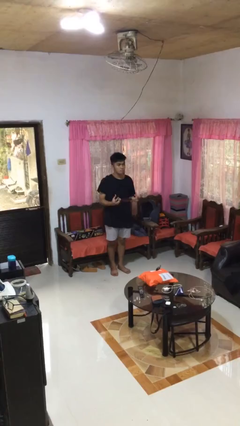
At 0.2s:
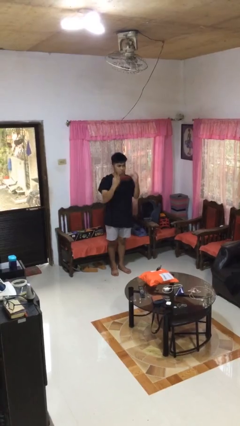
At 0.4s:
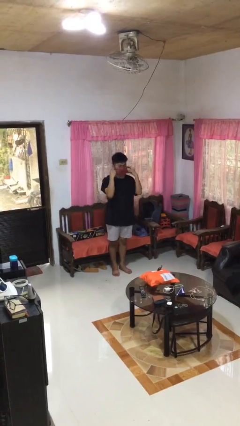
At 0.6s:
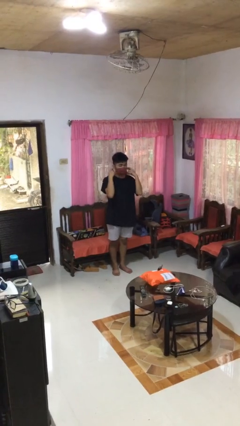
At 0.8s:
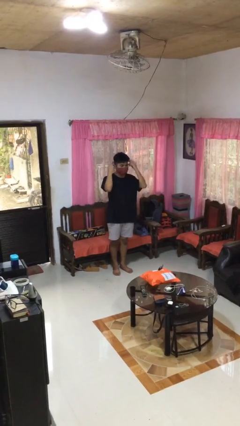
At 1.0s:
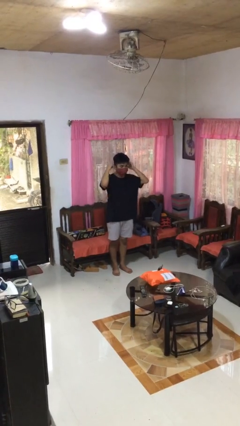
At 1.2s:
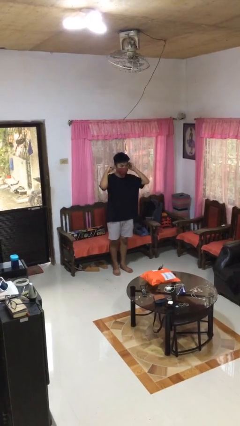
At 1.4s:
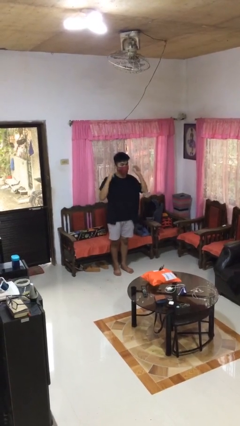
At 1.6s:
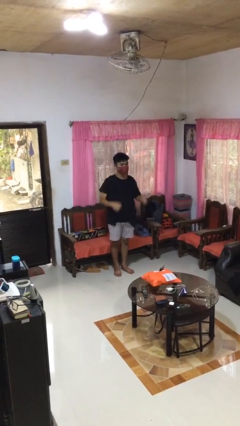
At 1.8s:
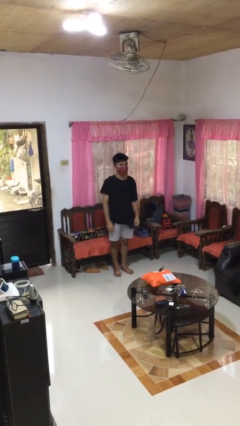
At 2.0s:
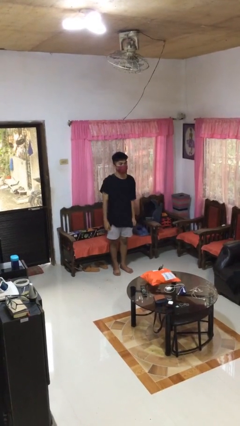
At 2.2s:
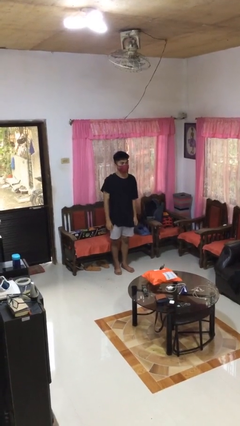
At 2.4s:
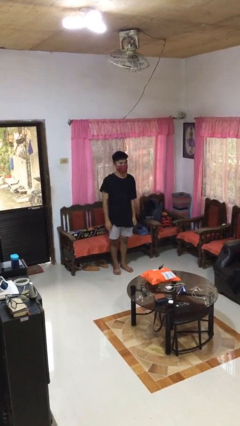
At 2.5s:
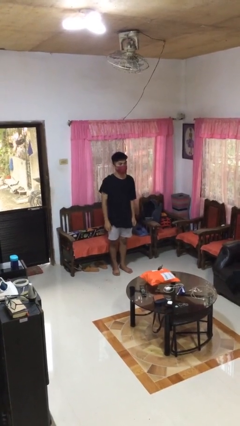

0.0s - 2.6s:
person puts on facemask

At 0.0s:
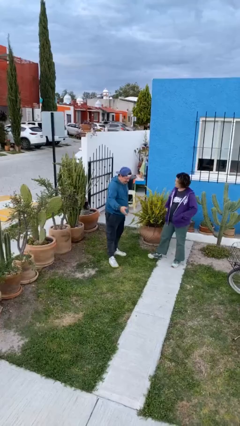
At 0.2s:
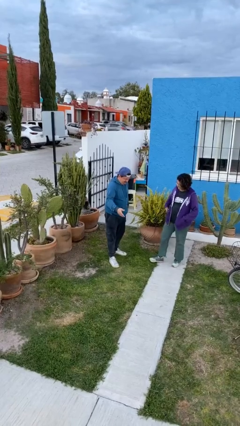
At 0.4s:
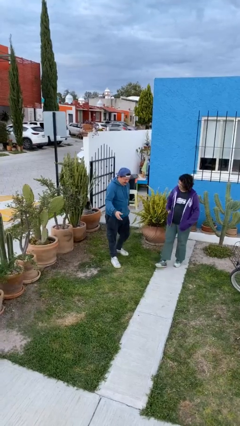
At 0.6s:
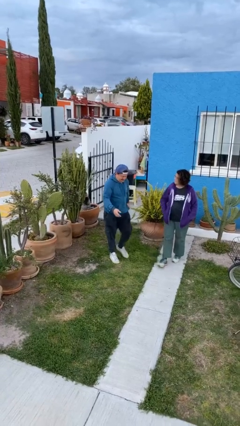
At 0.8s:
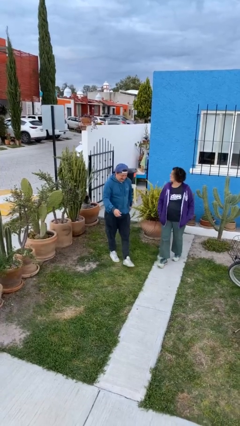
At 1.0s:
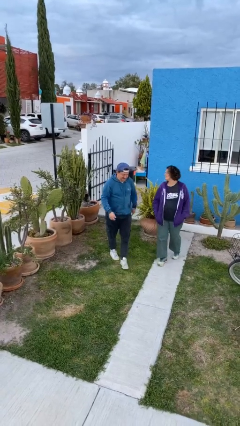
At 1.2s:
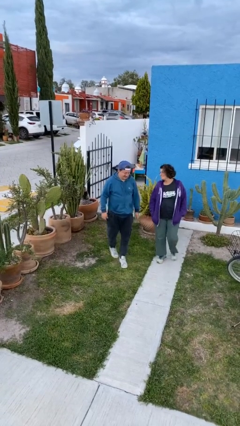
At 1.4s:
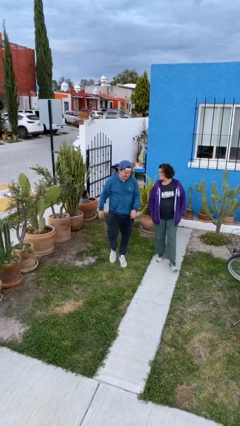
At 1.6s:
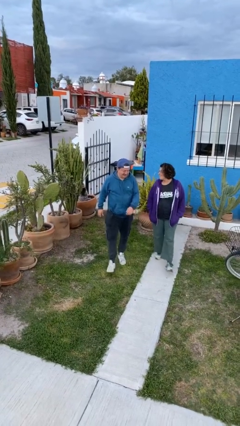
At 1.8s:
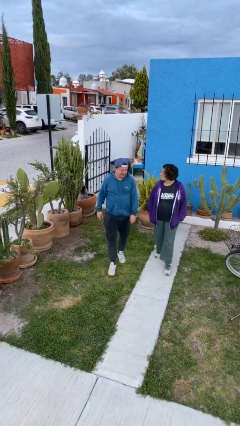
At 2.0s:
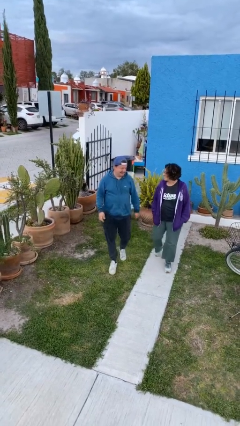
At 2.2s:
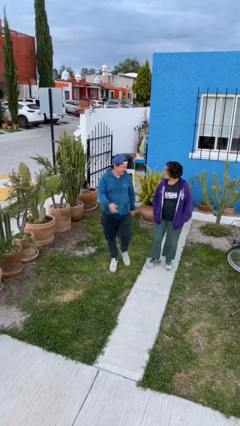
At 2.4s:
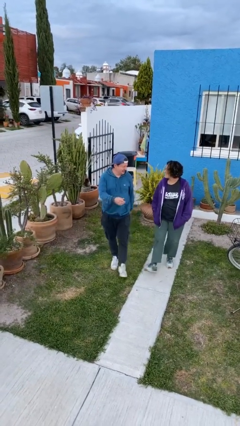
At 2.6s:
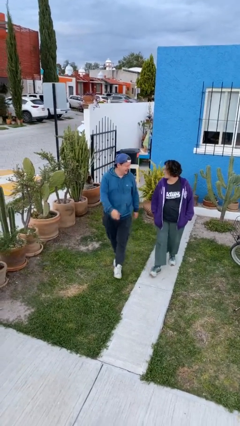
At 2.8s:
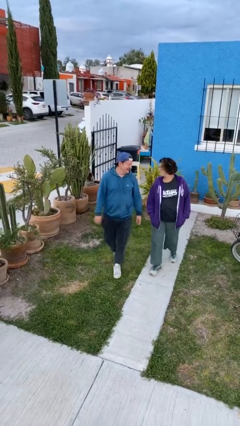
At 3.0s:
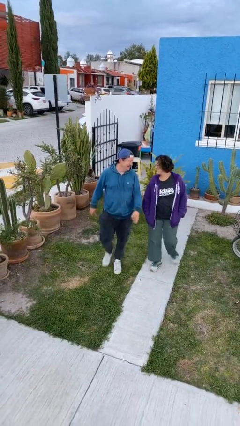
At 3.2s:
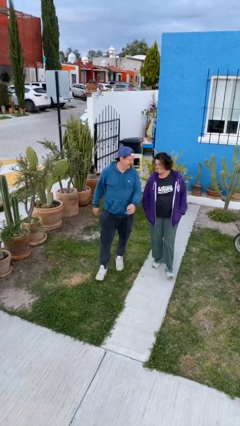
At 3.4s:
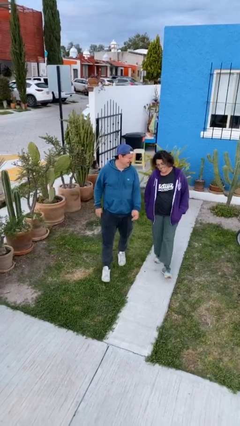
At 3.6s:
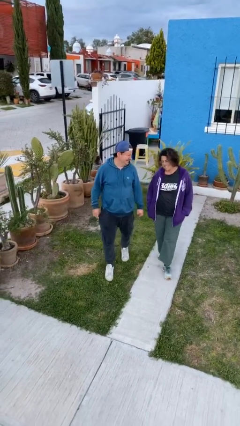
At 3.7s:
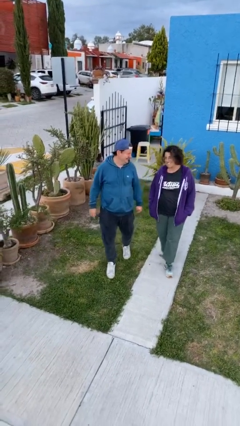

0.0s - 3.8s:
person talks to person

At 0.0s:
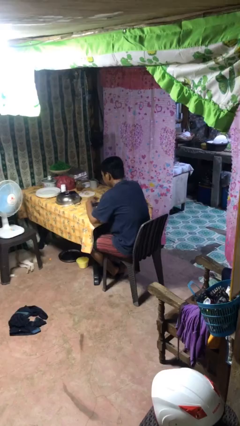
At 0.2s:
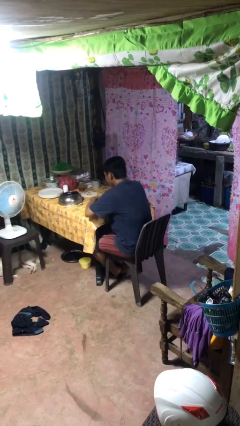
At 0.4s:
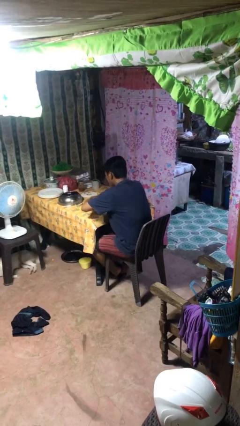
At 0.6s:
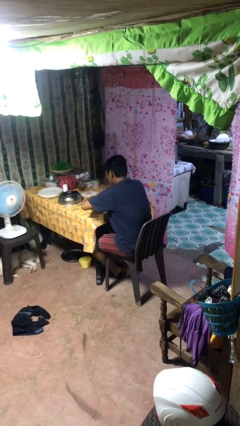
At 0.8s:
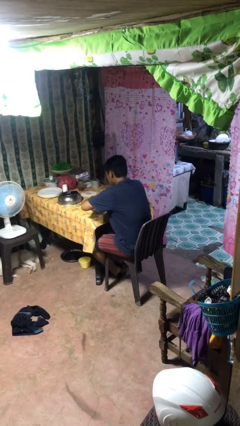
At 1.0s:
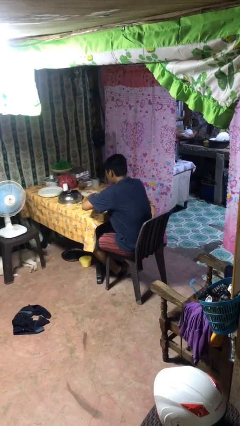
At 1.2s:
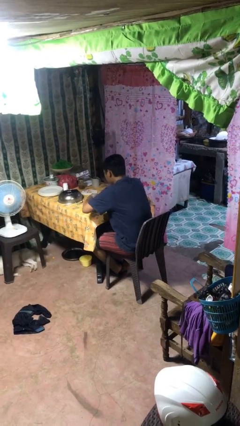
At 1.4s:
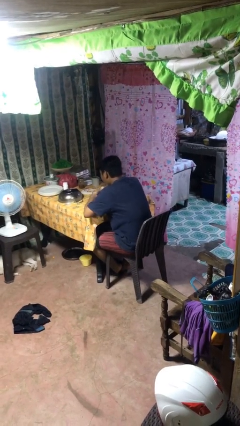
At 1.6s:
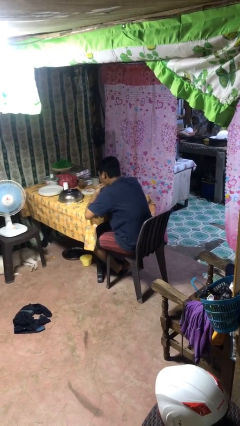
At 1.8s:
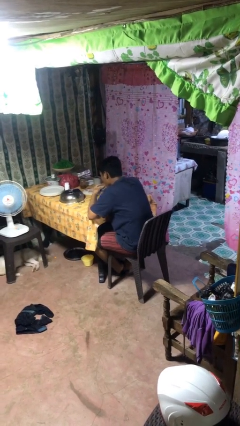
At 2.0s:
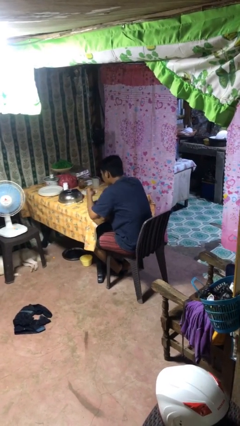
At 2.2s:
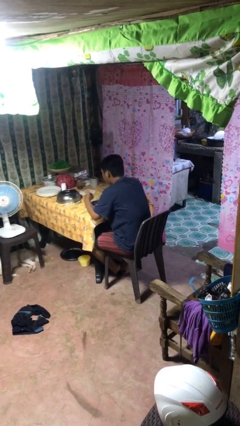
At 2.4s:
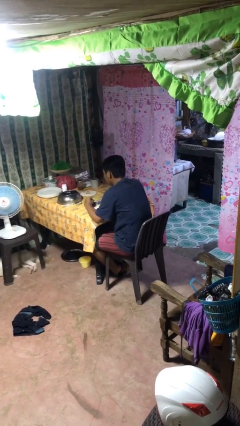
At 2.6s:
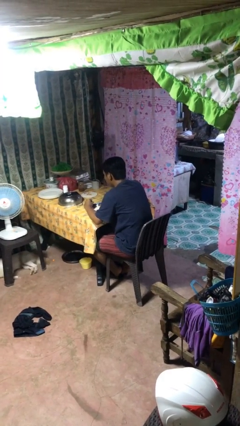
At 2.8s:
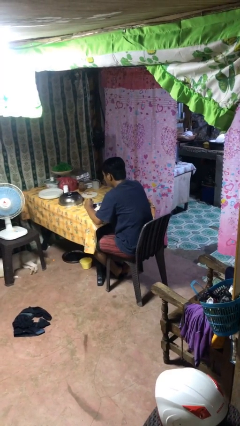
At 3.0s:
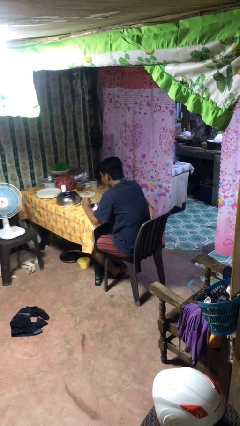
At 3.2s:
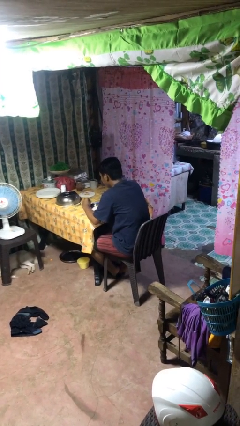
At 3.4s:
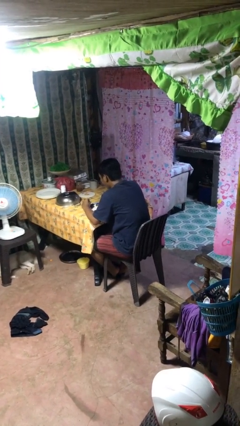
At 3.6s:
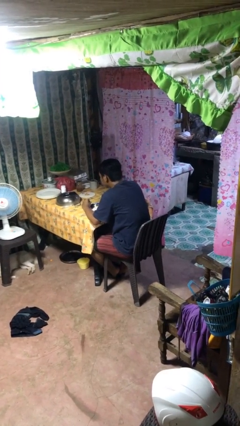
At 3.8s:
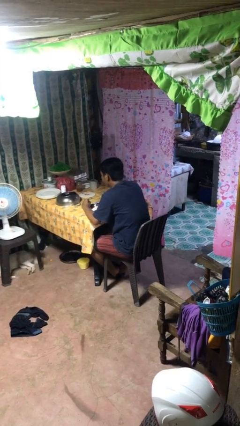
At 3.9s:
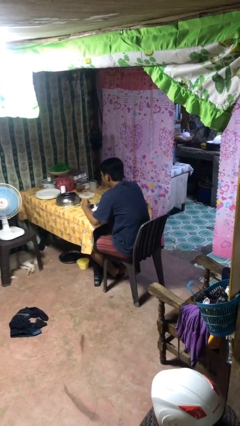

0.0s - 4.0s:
person eats with hands

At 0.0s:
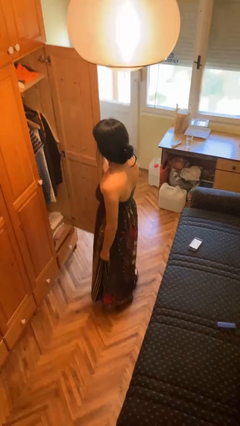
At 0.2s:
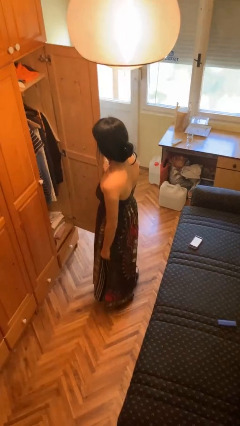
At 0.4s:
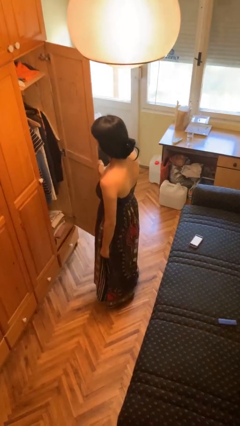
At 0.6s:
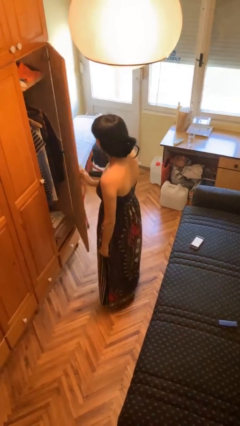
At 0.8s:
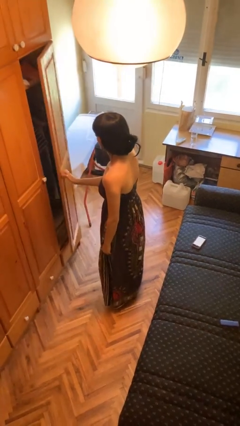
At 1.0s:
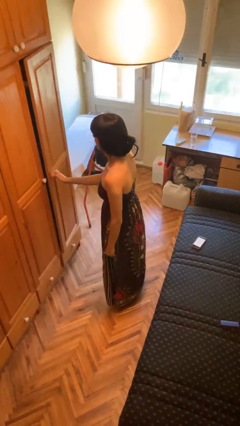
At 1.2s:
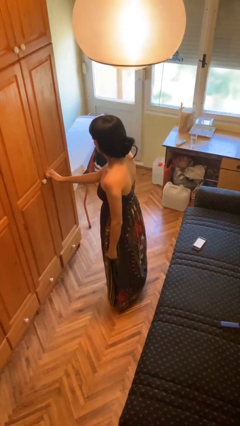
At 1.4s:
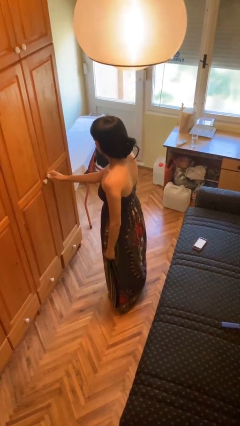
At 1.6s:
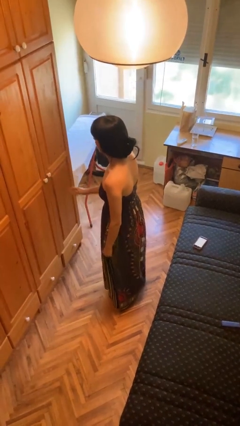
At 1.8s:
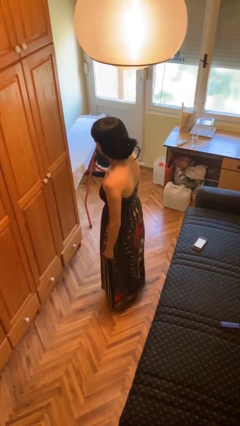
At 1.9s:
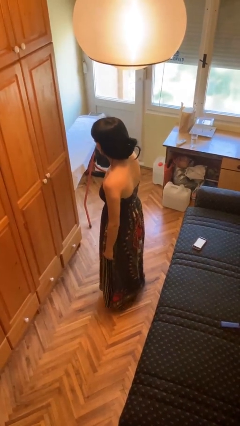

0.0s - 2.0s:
person closes closet door

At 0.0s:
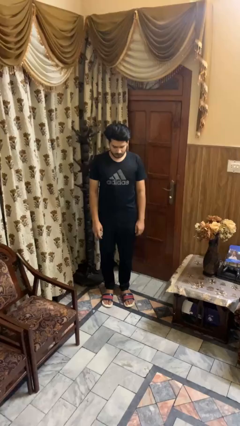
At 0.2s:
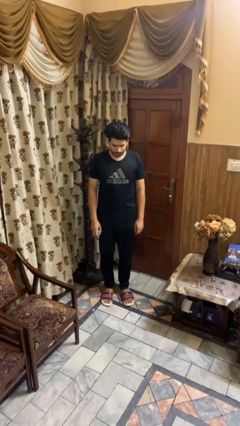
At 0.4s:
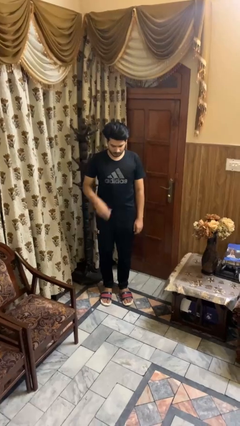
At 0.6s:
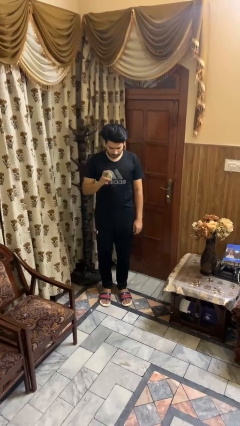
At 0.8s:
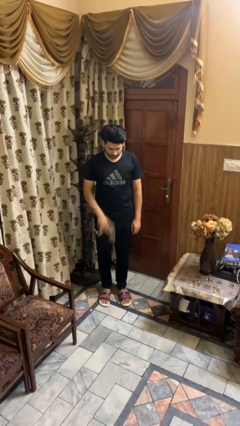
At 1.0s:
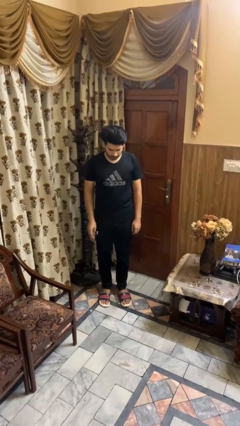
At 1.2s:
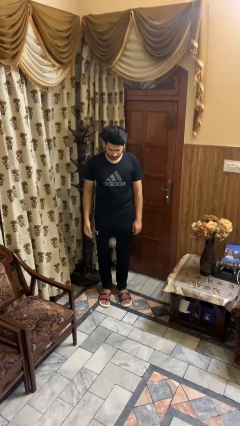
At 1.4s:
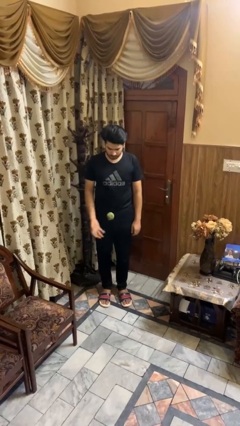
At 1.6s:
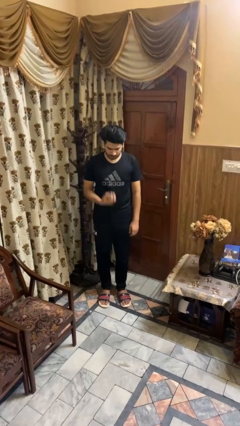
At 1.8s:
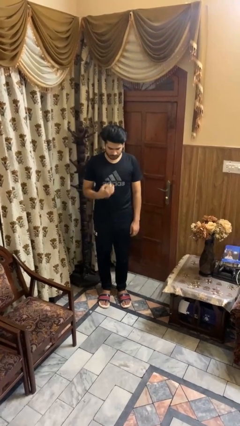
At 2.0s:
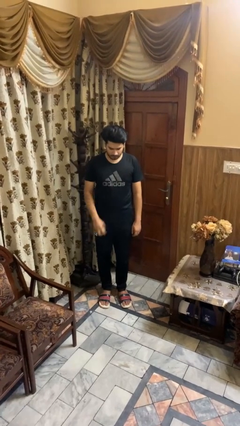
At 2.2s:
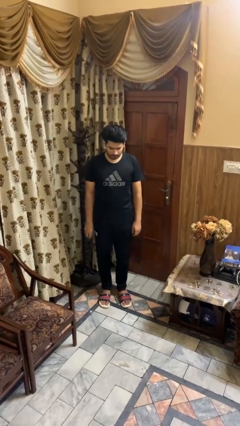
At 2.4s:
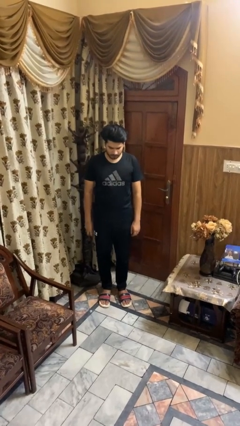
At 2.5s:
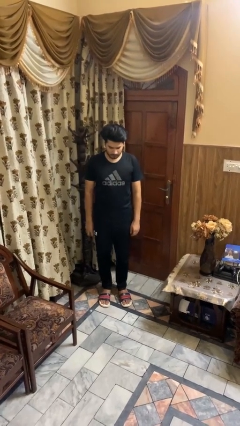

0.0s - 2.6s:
person bounces ball on floor

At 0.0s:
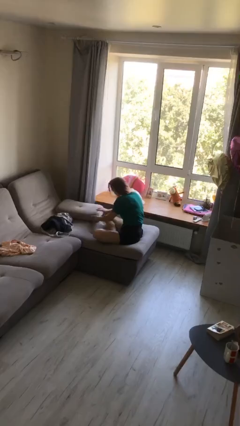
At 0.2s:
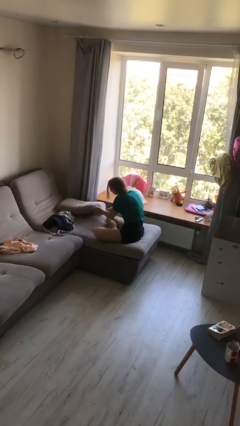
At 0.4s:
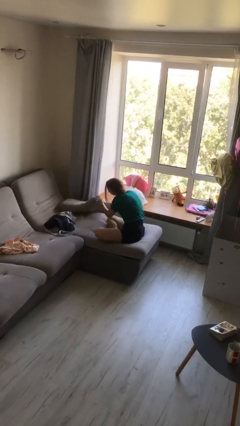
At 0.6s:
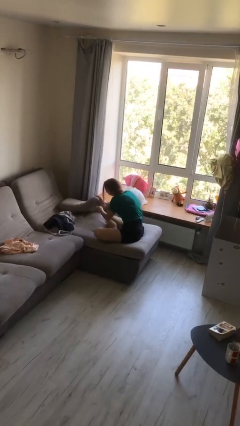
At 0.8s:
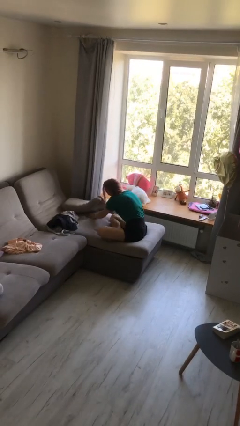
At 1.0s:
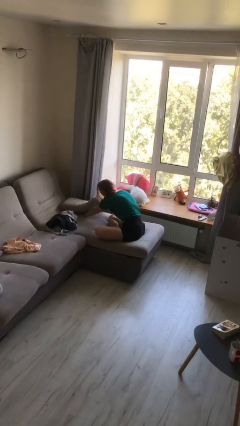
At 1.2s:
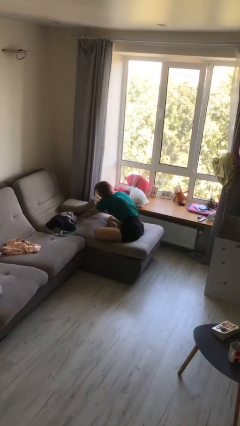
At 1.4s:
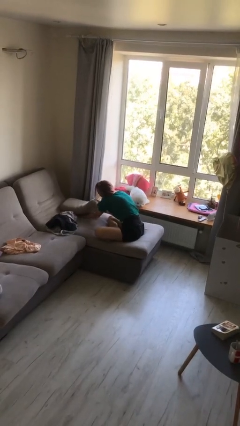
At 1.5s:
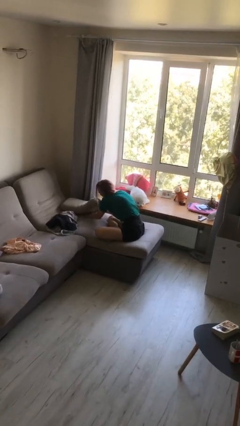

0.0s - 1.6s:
person searches in couch

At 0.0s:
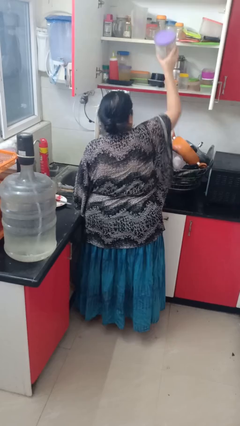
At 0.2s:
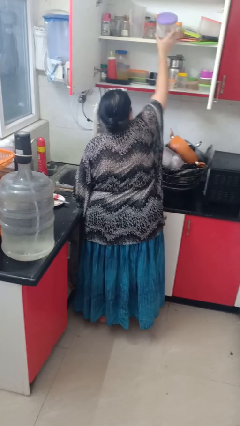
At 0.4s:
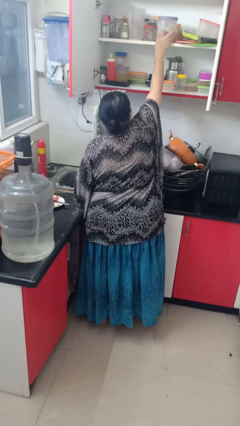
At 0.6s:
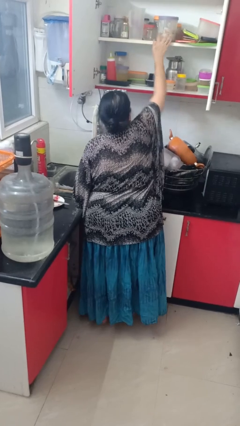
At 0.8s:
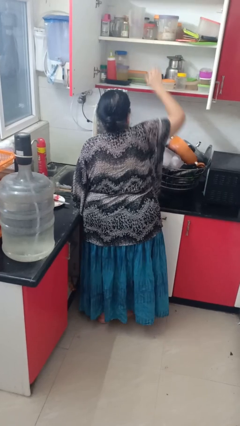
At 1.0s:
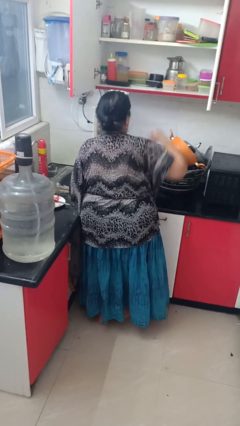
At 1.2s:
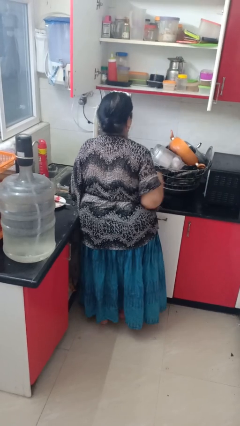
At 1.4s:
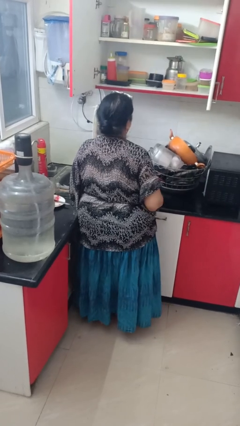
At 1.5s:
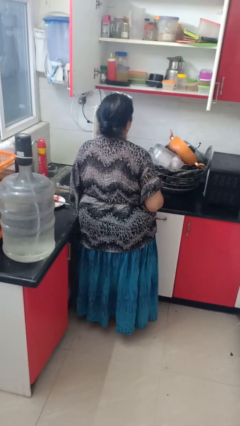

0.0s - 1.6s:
person takes object from cabinet
